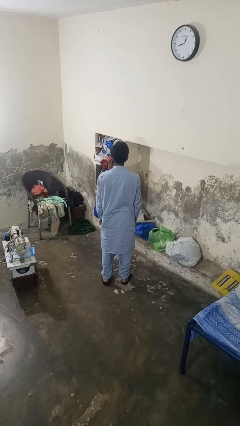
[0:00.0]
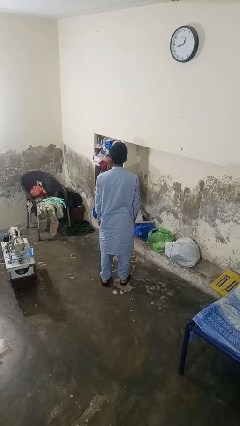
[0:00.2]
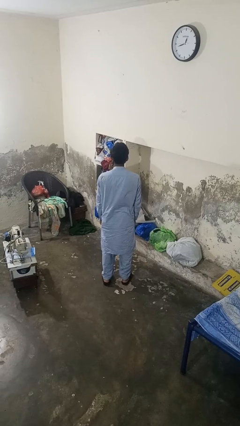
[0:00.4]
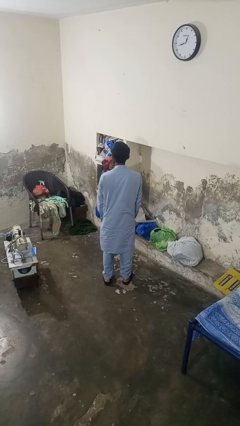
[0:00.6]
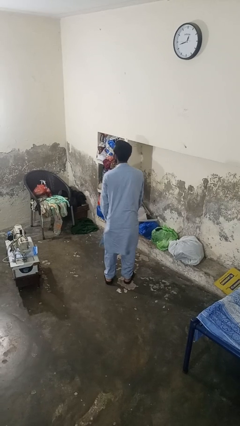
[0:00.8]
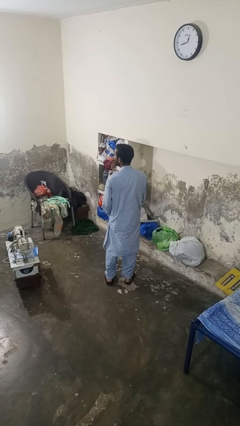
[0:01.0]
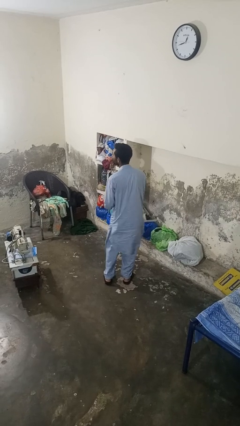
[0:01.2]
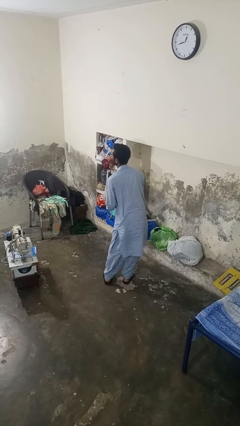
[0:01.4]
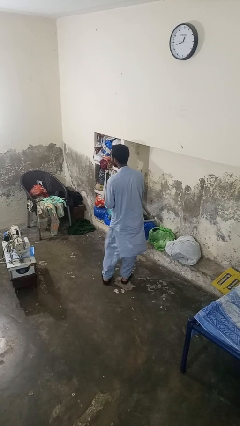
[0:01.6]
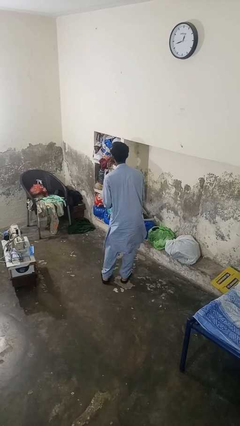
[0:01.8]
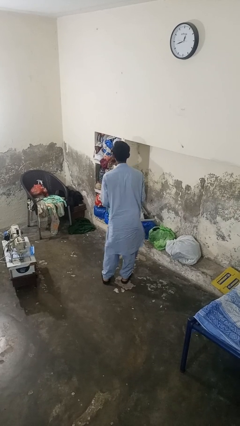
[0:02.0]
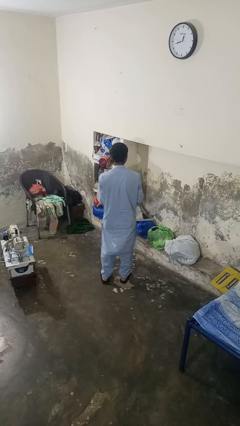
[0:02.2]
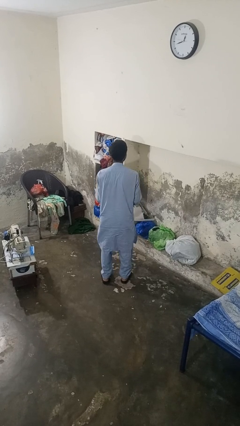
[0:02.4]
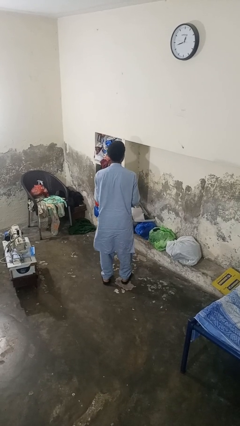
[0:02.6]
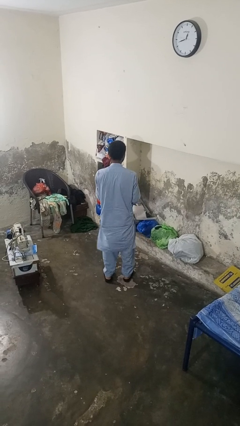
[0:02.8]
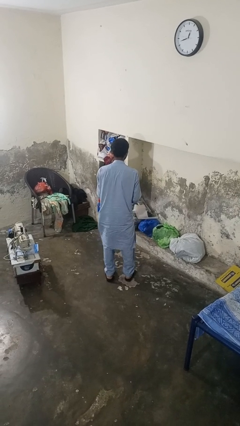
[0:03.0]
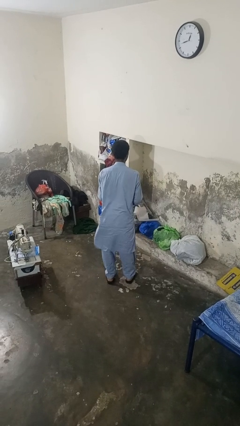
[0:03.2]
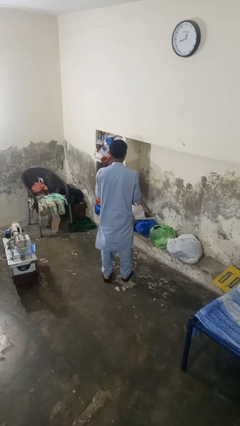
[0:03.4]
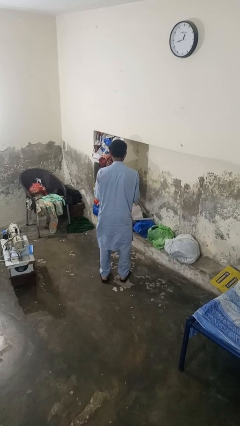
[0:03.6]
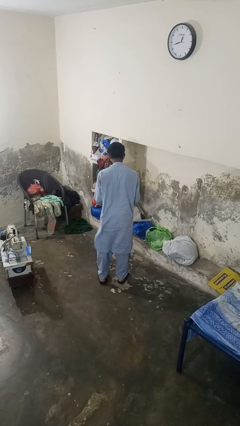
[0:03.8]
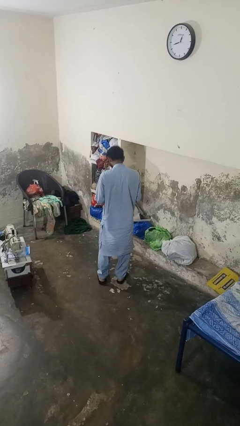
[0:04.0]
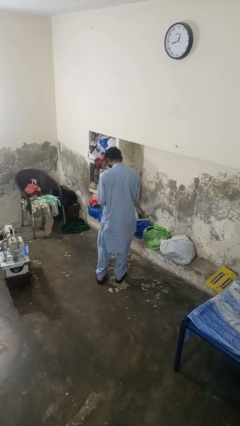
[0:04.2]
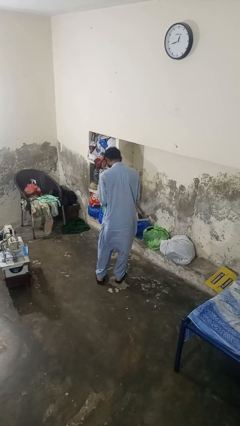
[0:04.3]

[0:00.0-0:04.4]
person wiggles hips

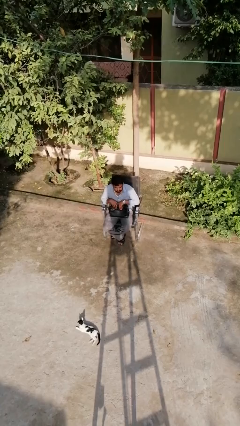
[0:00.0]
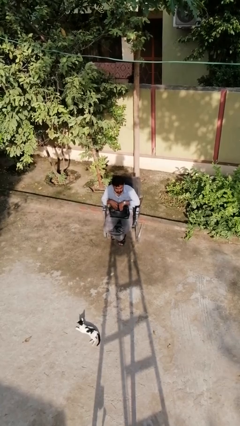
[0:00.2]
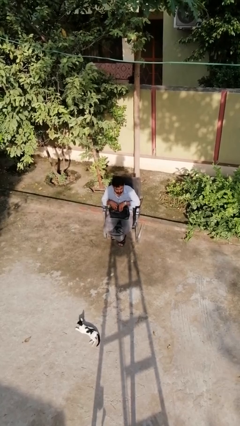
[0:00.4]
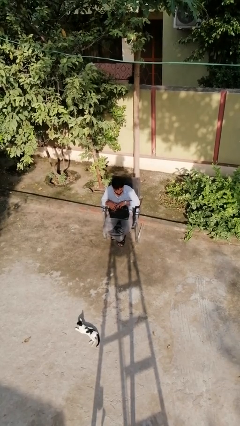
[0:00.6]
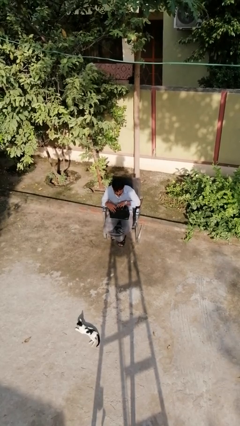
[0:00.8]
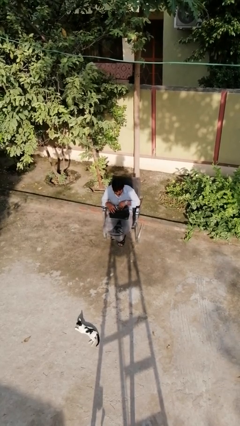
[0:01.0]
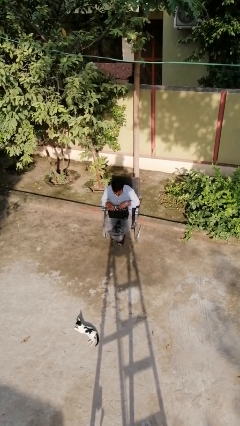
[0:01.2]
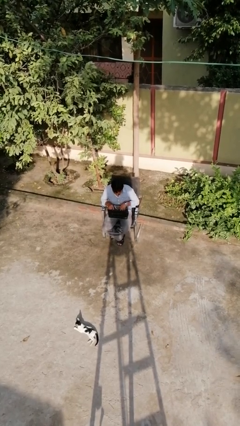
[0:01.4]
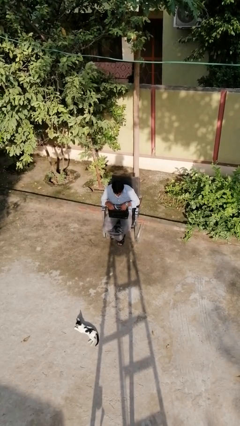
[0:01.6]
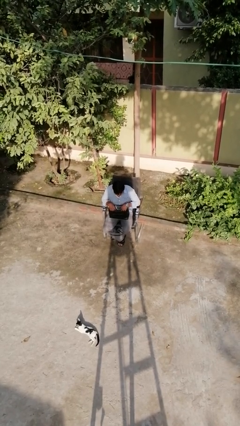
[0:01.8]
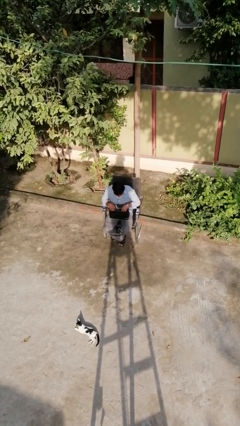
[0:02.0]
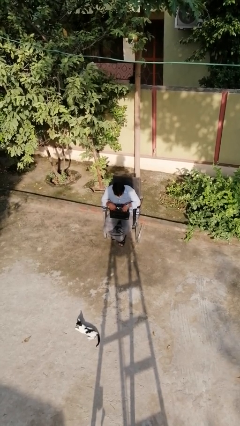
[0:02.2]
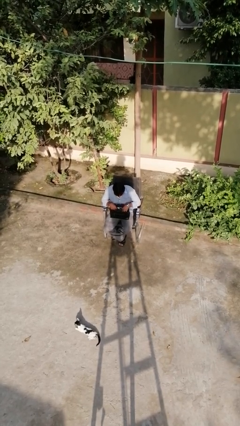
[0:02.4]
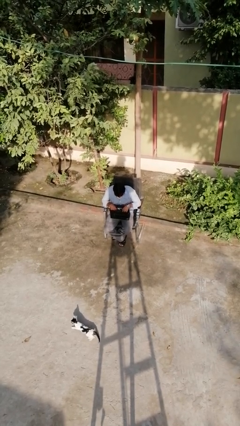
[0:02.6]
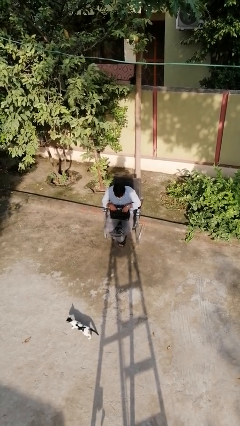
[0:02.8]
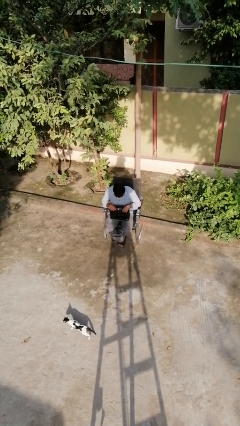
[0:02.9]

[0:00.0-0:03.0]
person searches in backpack

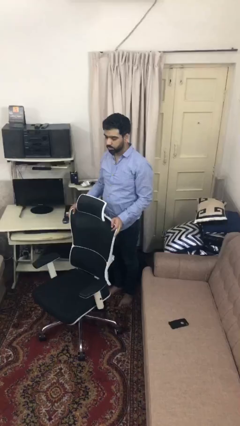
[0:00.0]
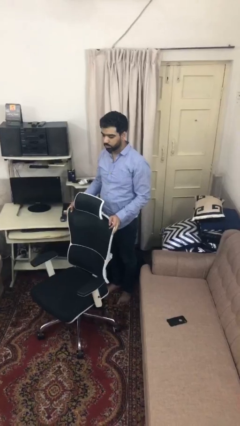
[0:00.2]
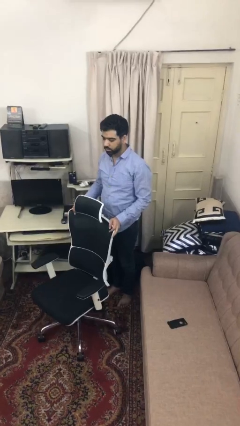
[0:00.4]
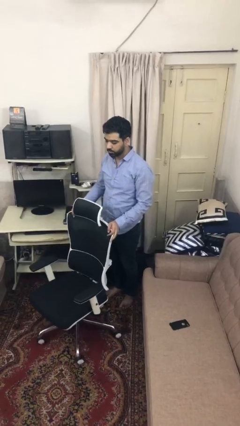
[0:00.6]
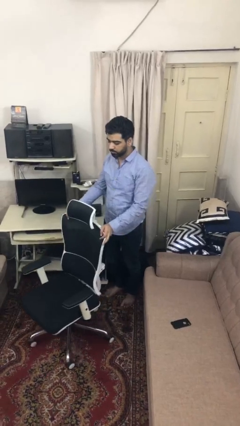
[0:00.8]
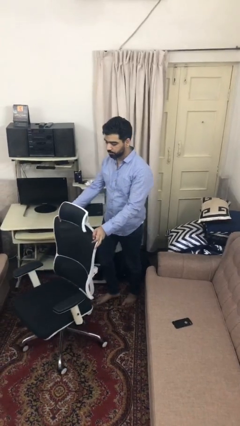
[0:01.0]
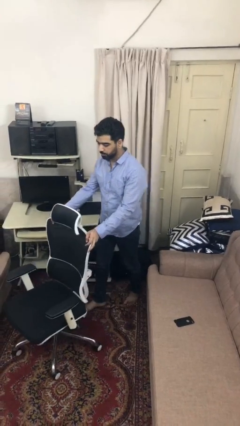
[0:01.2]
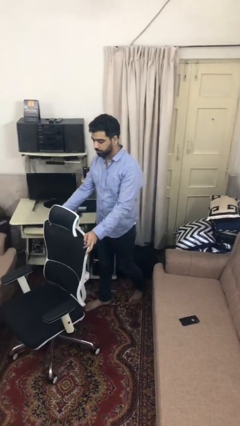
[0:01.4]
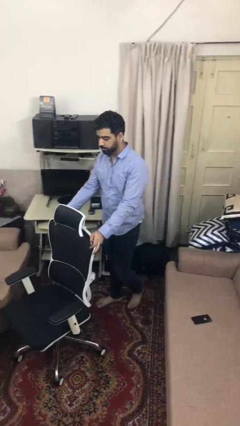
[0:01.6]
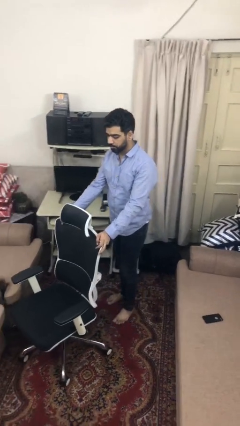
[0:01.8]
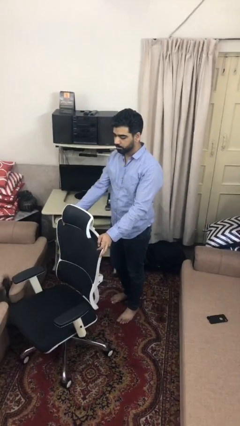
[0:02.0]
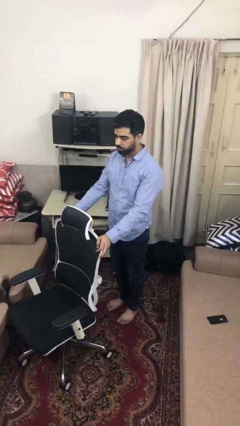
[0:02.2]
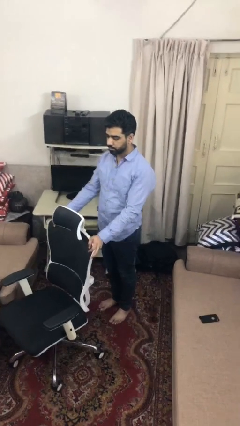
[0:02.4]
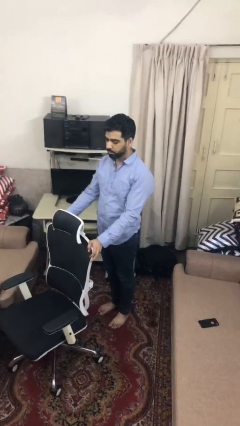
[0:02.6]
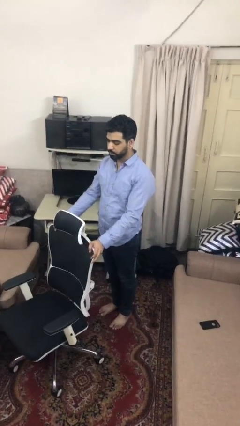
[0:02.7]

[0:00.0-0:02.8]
person pushes wheeled cart

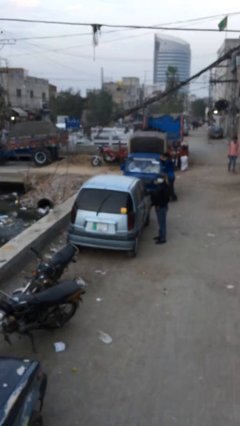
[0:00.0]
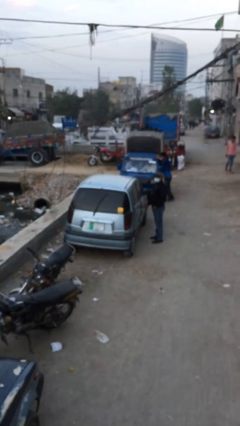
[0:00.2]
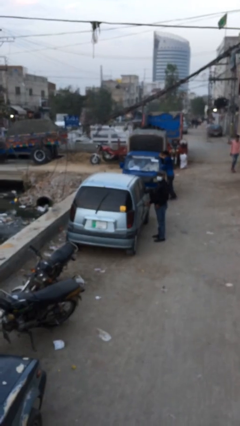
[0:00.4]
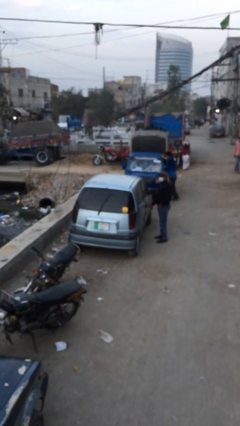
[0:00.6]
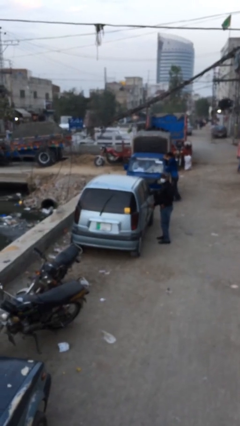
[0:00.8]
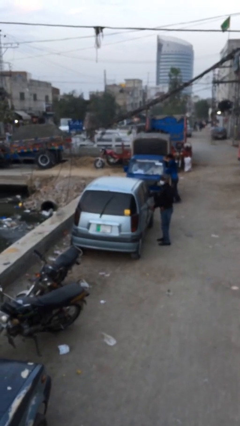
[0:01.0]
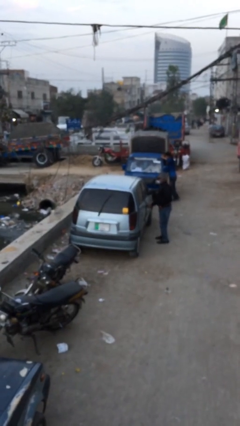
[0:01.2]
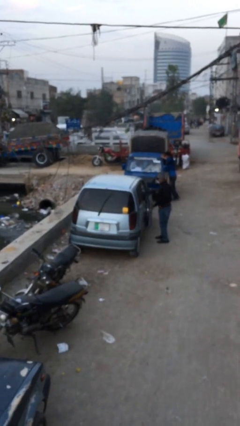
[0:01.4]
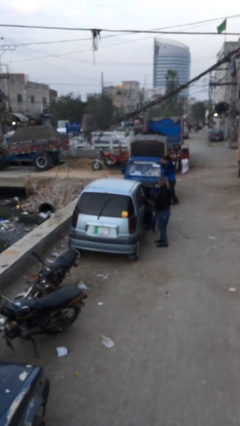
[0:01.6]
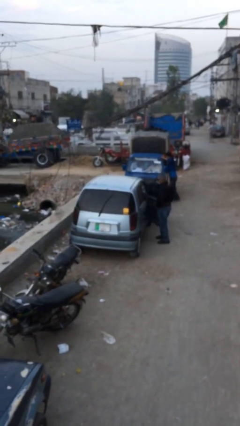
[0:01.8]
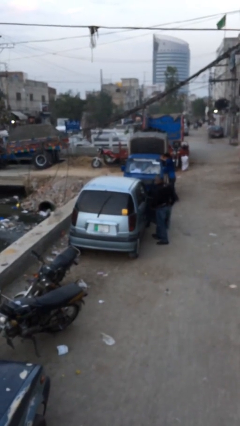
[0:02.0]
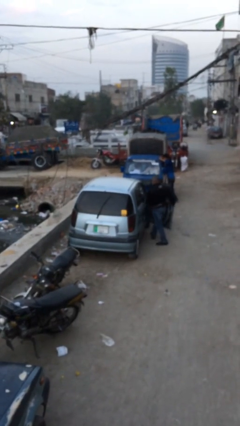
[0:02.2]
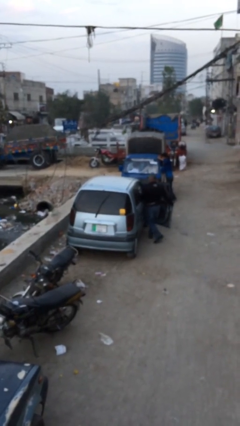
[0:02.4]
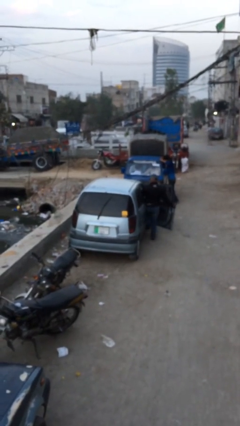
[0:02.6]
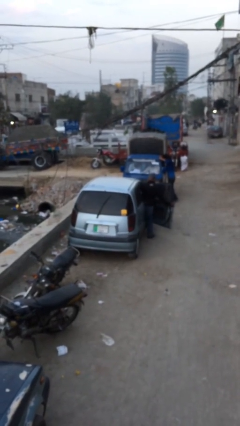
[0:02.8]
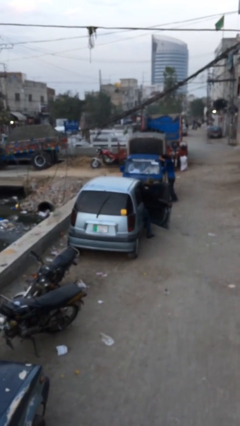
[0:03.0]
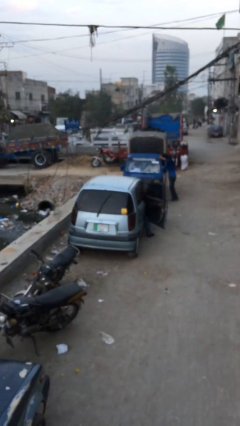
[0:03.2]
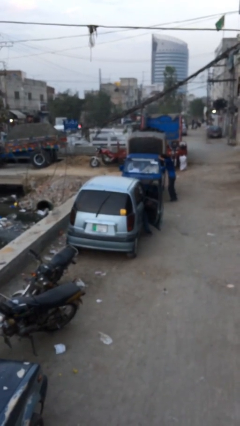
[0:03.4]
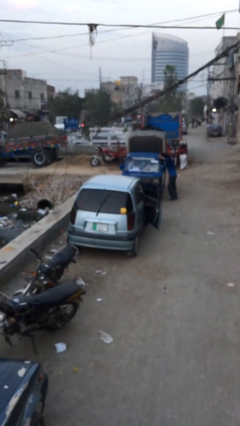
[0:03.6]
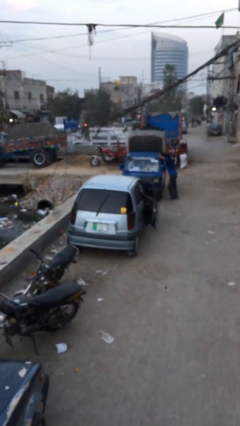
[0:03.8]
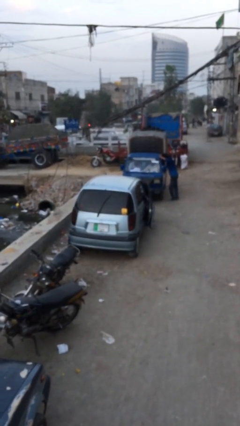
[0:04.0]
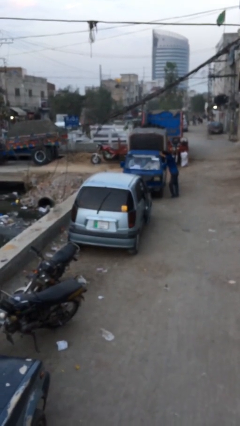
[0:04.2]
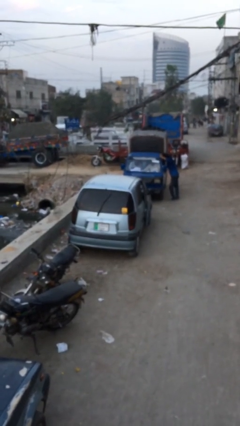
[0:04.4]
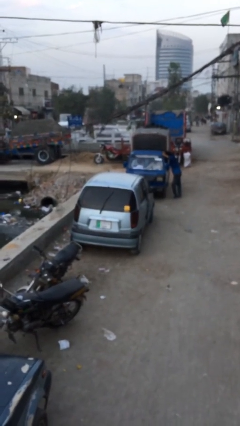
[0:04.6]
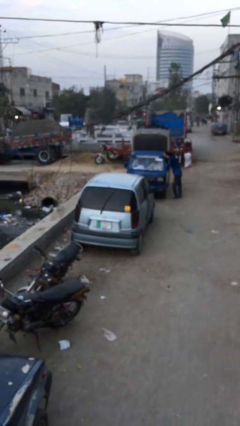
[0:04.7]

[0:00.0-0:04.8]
car picks up person

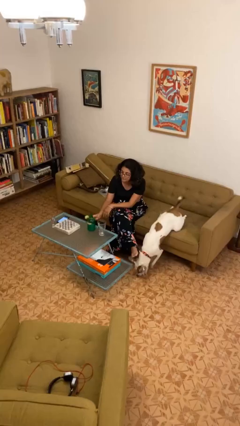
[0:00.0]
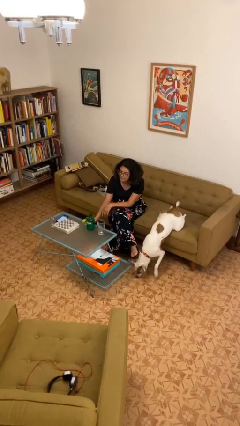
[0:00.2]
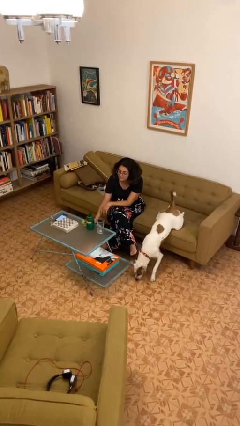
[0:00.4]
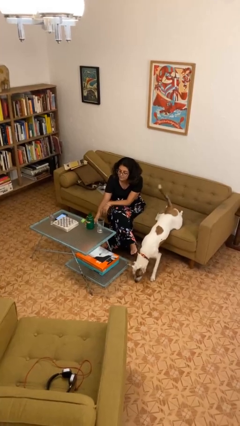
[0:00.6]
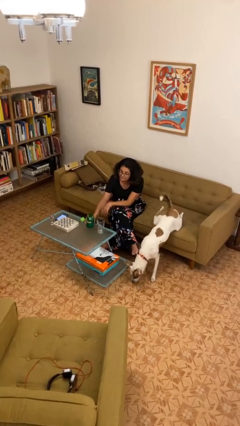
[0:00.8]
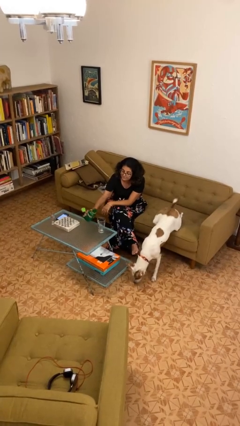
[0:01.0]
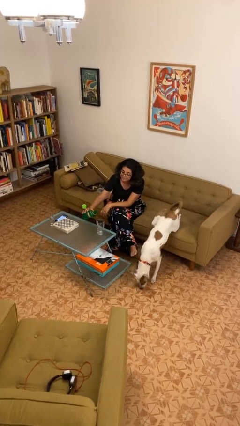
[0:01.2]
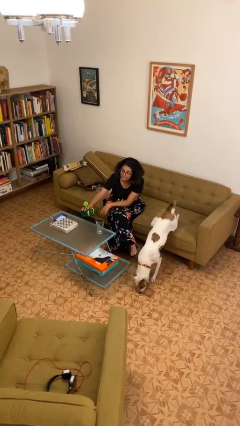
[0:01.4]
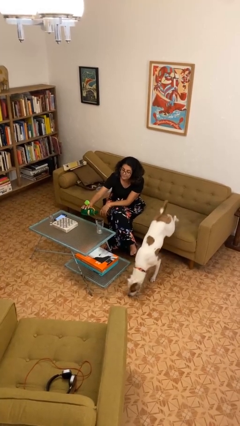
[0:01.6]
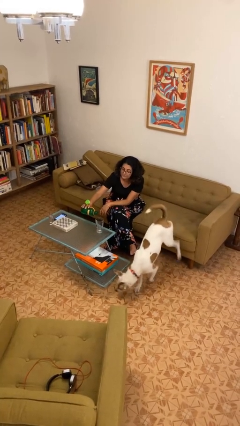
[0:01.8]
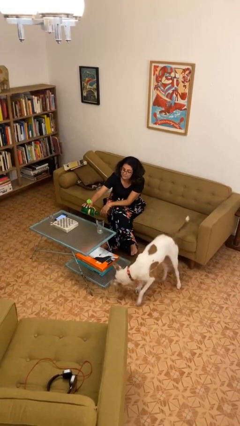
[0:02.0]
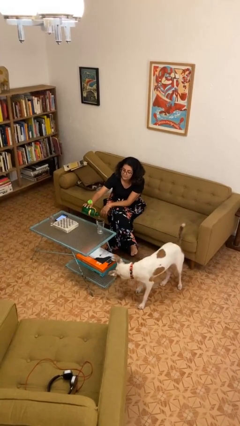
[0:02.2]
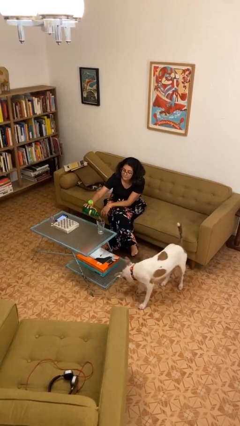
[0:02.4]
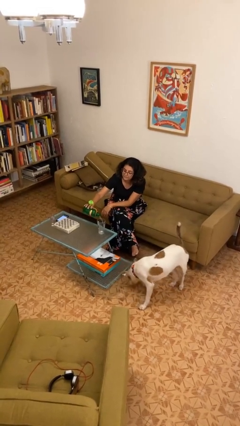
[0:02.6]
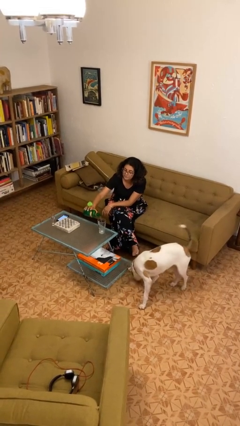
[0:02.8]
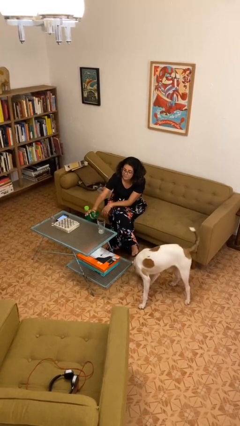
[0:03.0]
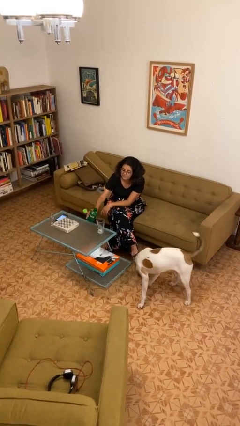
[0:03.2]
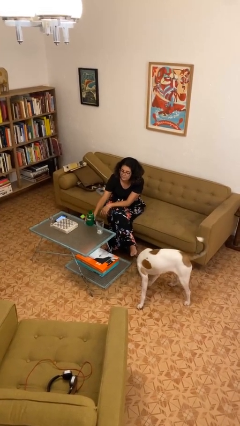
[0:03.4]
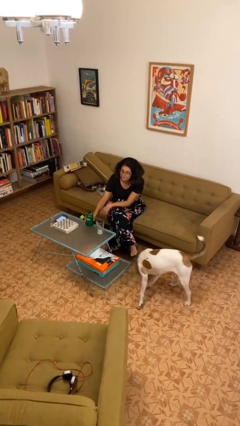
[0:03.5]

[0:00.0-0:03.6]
person pours liquid into cup
